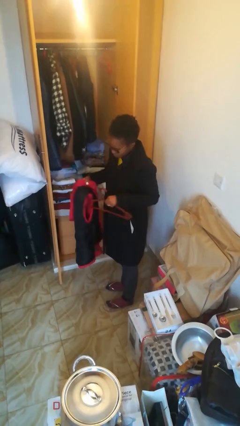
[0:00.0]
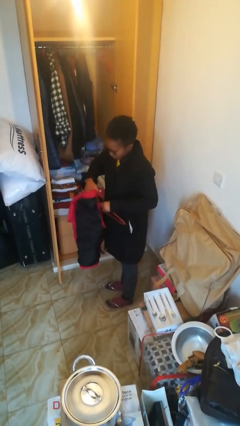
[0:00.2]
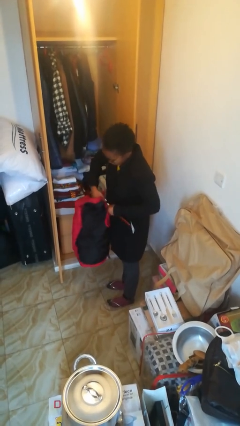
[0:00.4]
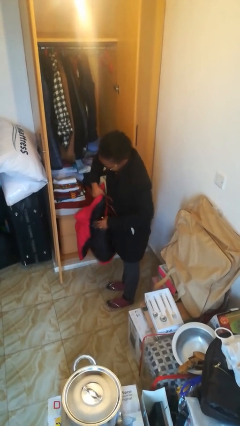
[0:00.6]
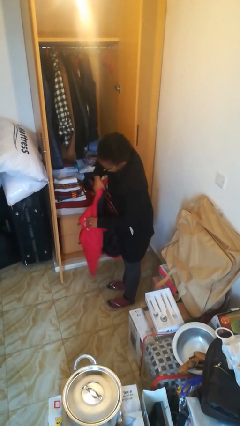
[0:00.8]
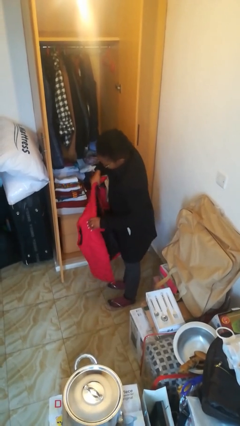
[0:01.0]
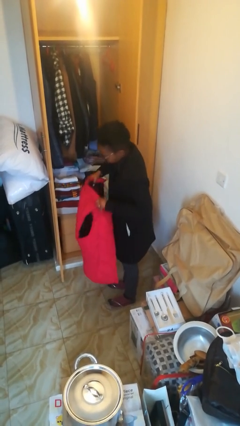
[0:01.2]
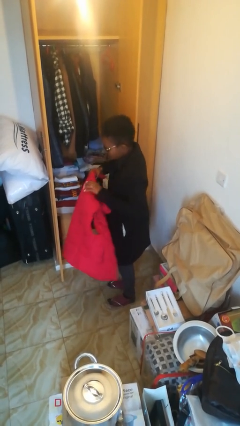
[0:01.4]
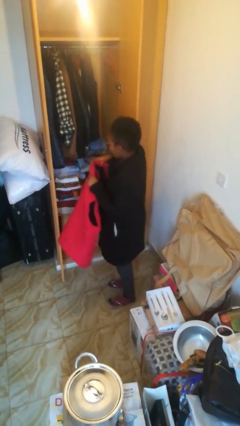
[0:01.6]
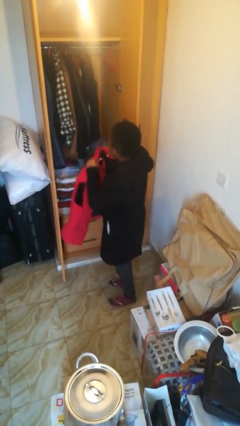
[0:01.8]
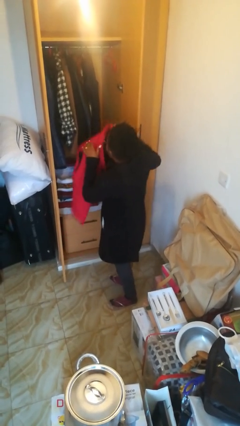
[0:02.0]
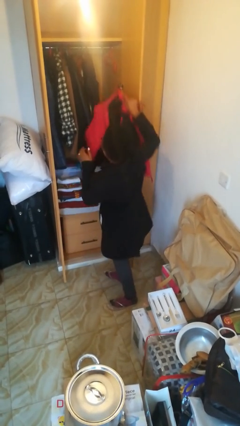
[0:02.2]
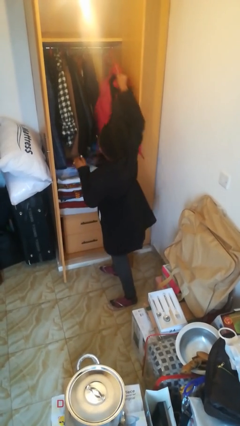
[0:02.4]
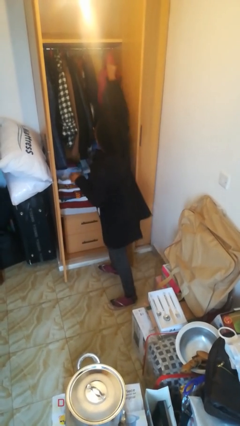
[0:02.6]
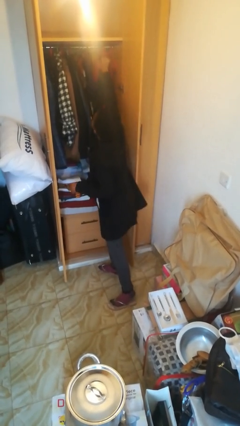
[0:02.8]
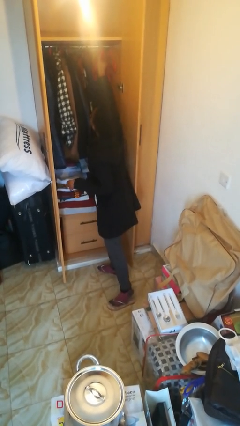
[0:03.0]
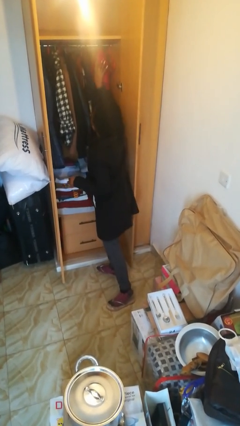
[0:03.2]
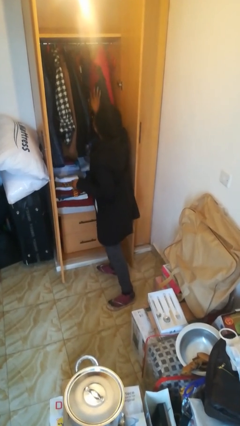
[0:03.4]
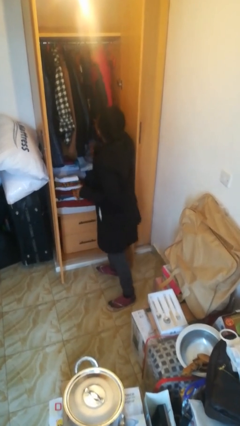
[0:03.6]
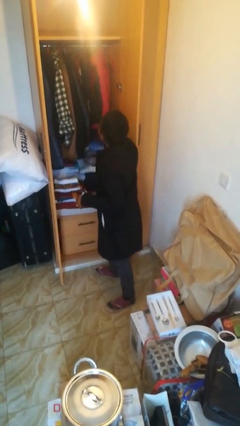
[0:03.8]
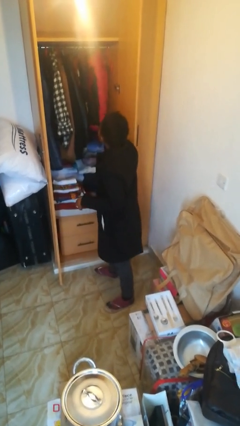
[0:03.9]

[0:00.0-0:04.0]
person puts clothes into closet

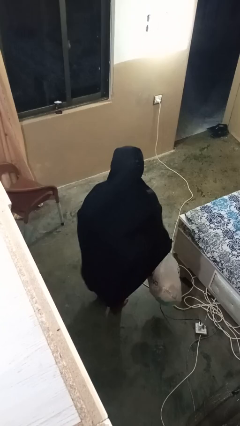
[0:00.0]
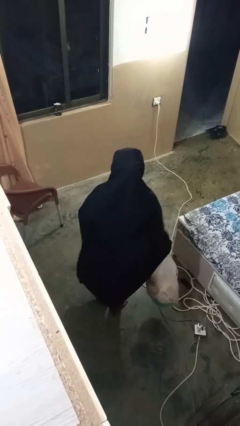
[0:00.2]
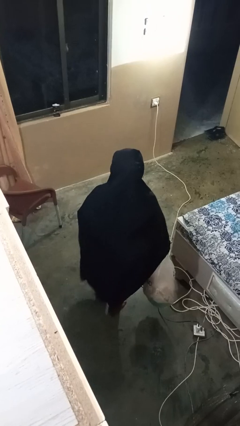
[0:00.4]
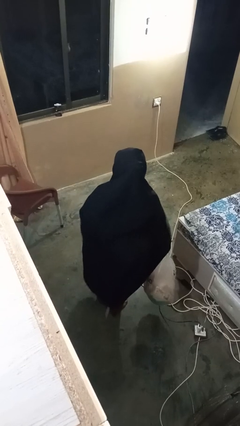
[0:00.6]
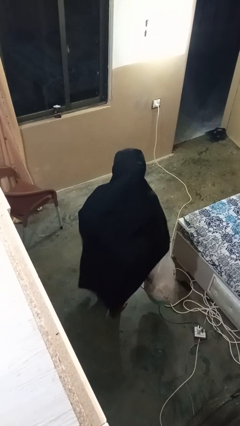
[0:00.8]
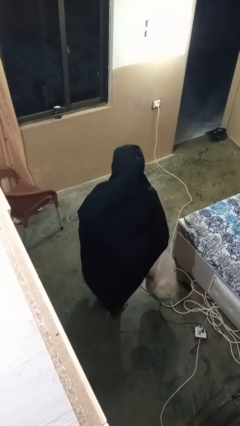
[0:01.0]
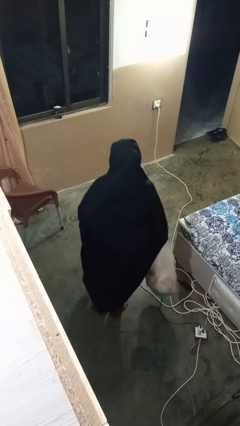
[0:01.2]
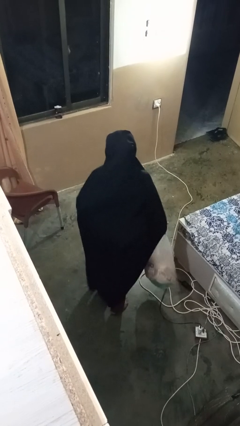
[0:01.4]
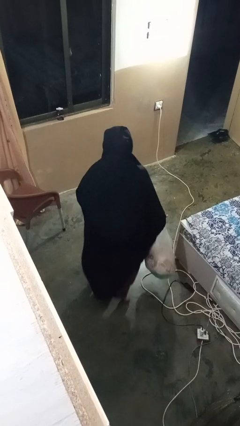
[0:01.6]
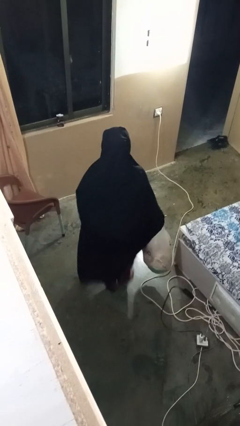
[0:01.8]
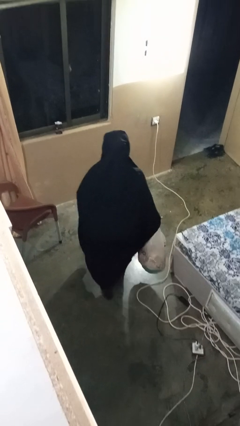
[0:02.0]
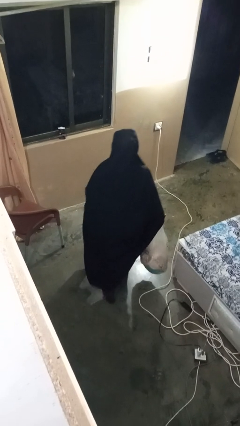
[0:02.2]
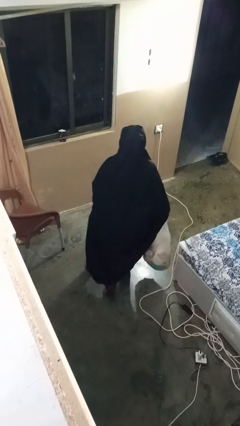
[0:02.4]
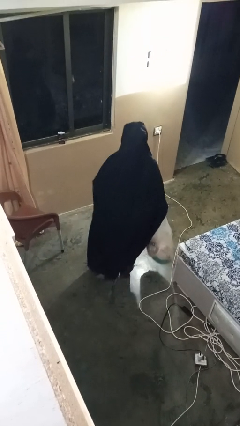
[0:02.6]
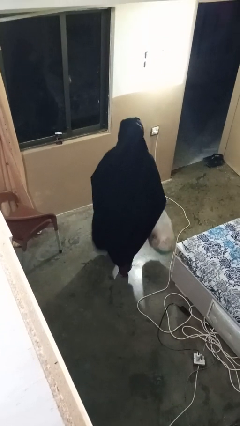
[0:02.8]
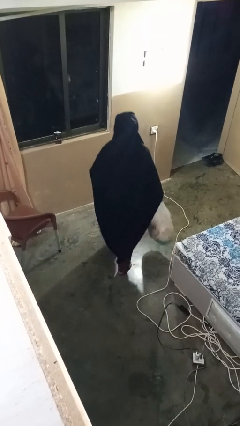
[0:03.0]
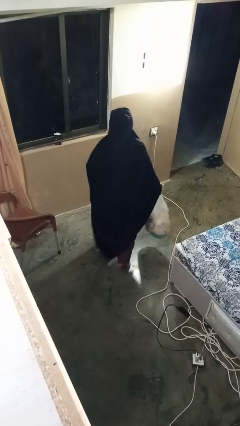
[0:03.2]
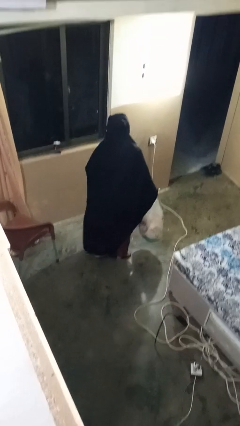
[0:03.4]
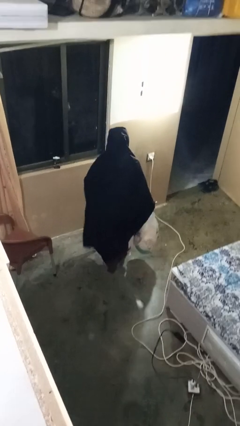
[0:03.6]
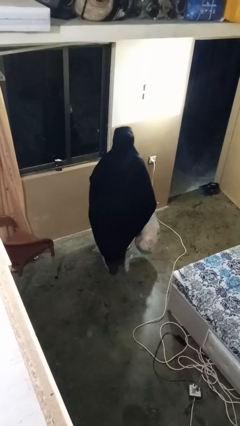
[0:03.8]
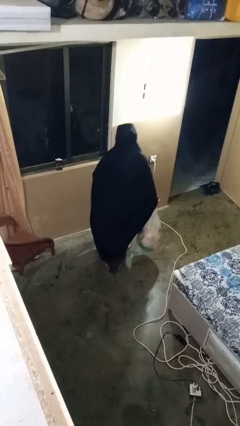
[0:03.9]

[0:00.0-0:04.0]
person carries groceries

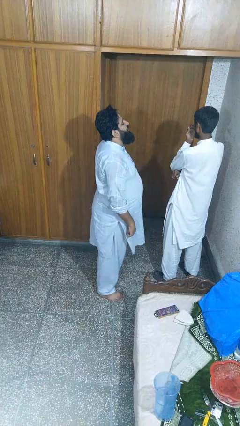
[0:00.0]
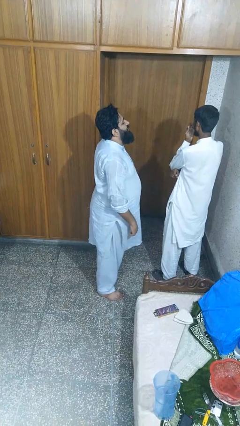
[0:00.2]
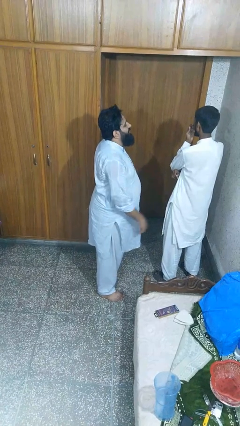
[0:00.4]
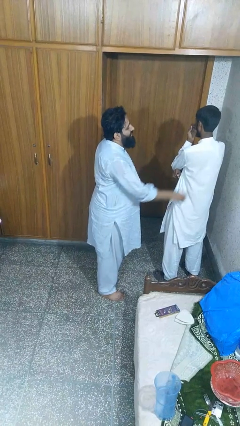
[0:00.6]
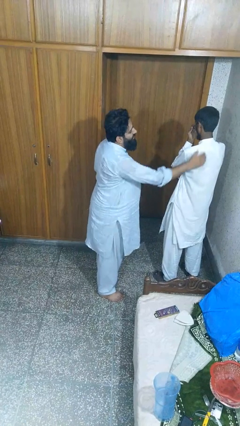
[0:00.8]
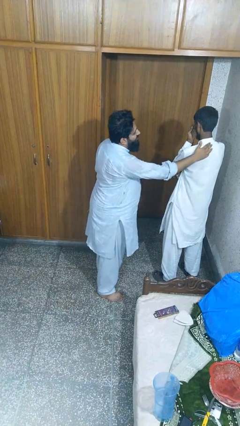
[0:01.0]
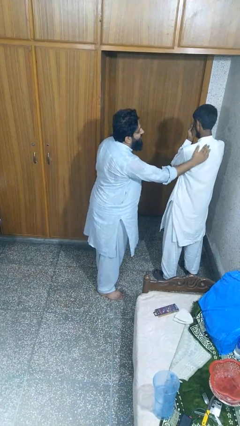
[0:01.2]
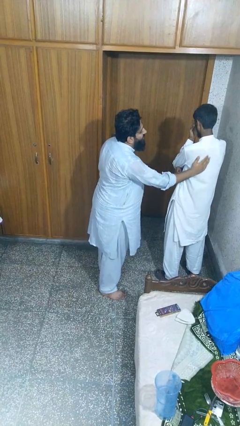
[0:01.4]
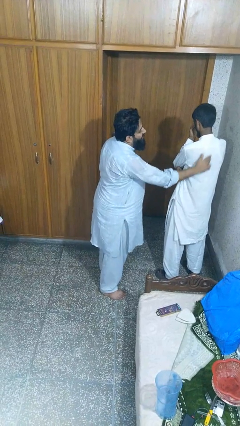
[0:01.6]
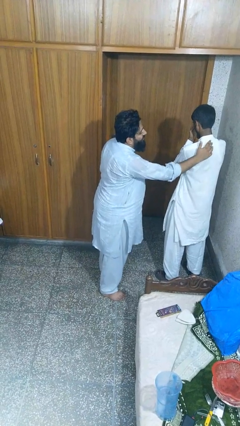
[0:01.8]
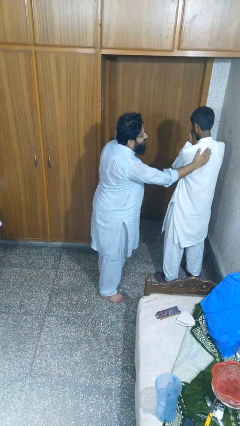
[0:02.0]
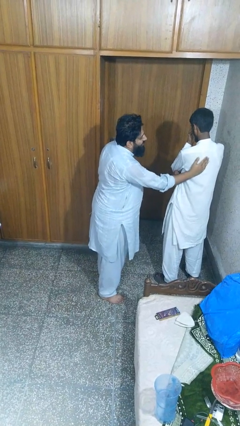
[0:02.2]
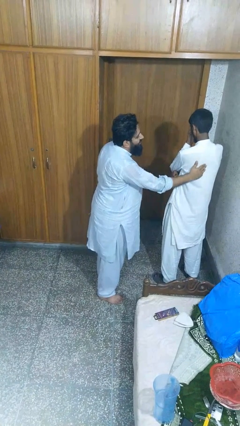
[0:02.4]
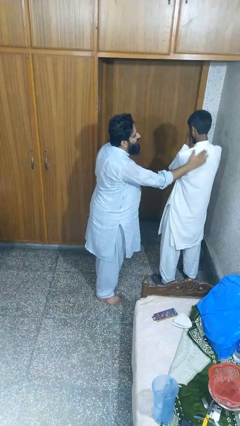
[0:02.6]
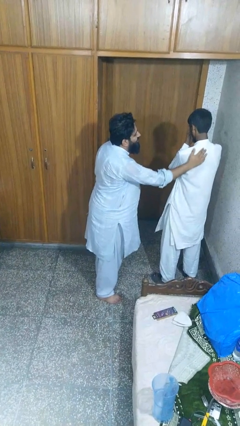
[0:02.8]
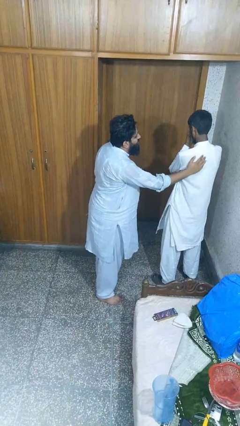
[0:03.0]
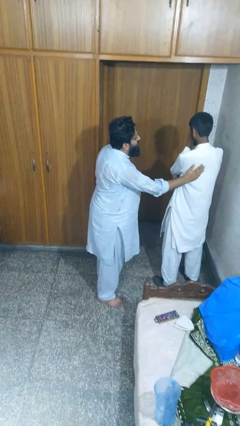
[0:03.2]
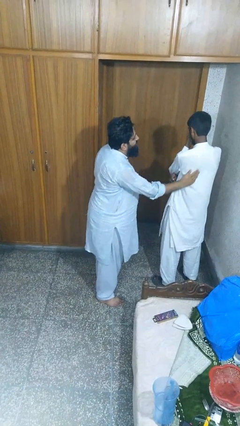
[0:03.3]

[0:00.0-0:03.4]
person touches back of person

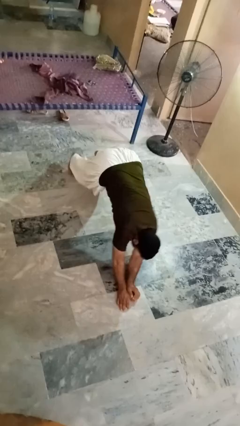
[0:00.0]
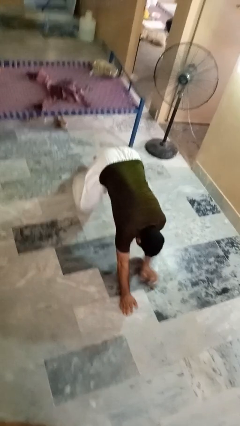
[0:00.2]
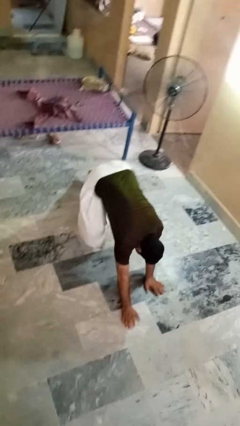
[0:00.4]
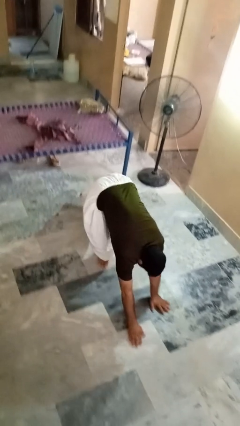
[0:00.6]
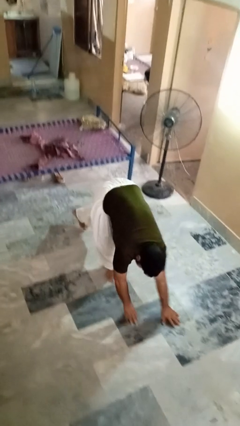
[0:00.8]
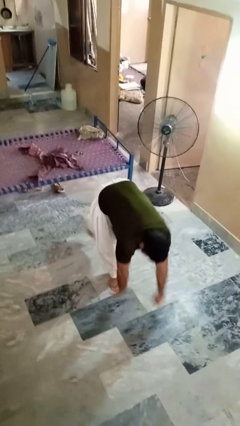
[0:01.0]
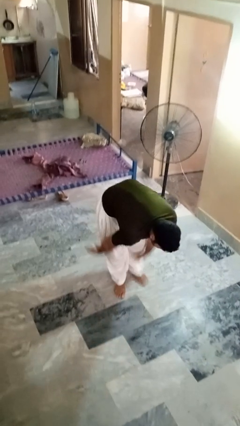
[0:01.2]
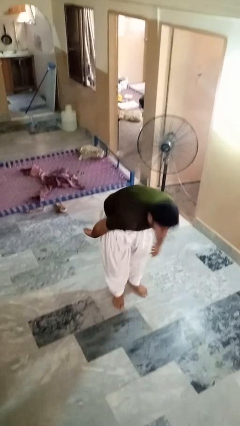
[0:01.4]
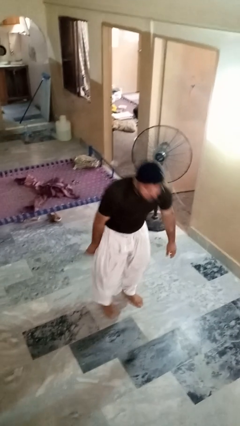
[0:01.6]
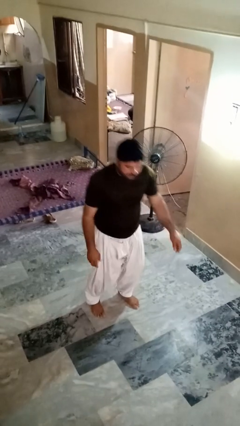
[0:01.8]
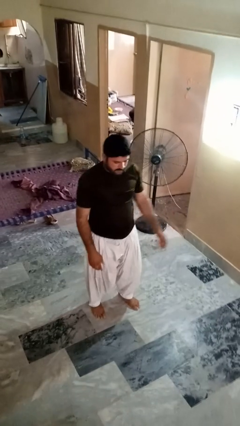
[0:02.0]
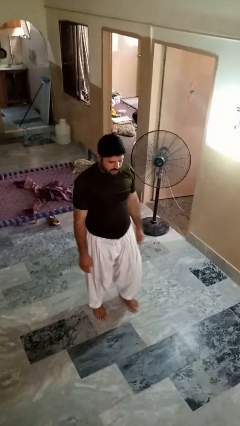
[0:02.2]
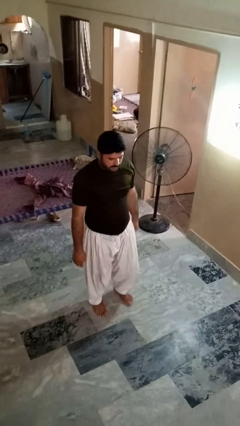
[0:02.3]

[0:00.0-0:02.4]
person stands up from floor

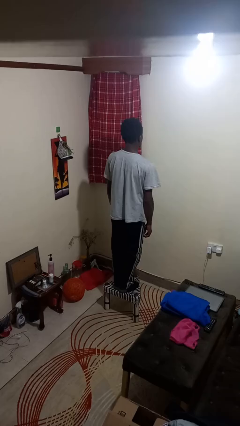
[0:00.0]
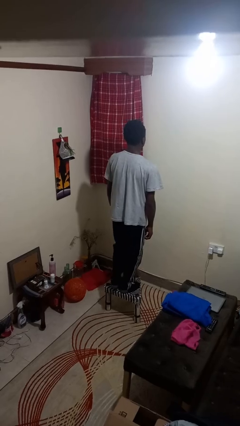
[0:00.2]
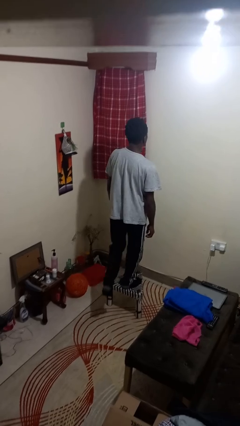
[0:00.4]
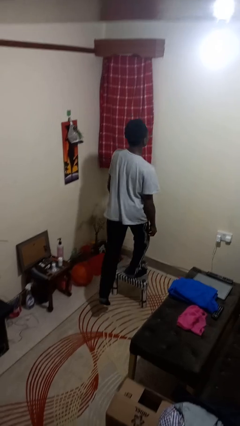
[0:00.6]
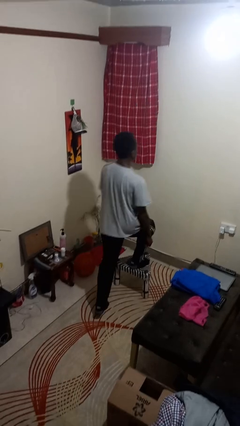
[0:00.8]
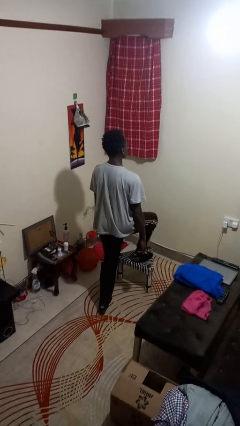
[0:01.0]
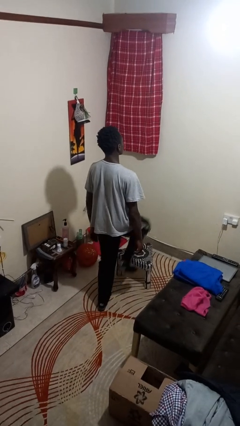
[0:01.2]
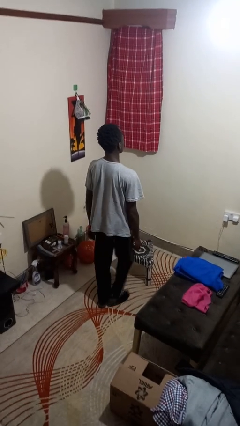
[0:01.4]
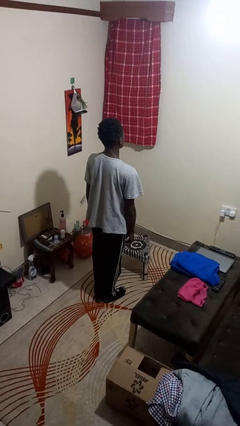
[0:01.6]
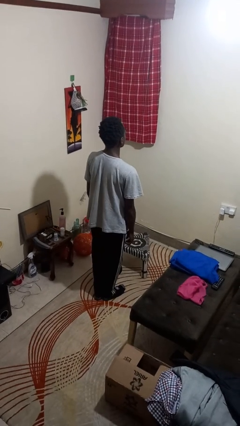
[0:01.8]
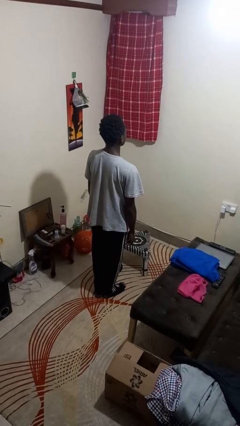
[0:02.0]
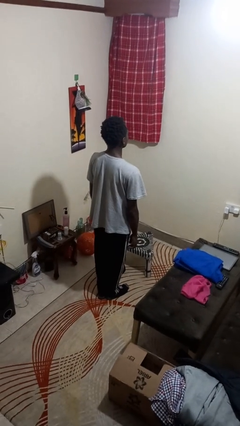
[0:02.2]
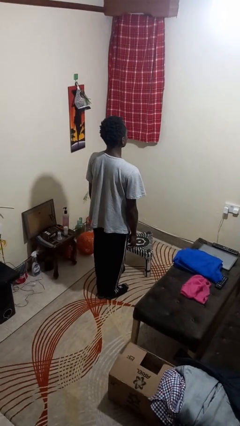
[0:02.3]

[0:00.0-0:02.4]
person climbs off chair

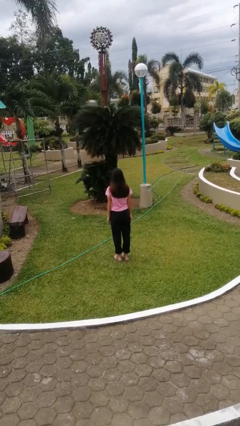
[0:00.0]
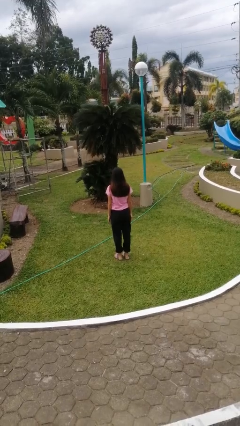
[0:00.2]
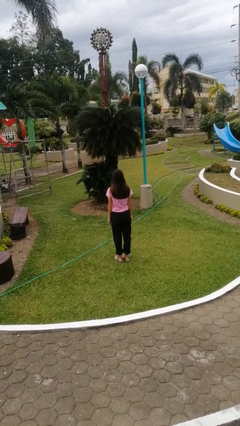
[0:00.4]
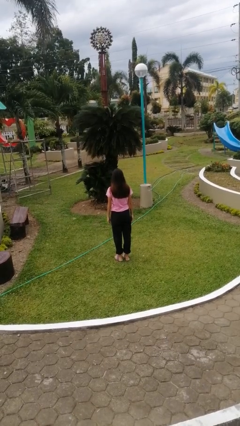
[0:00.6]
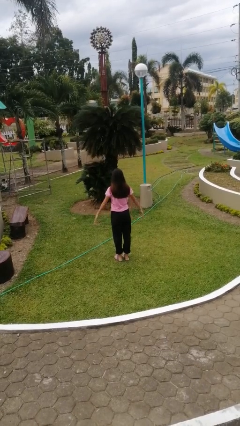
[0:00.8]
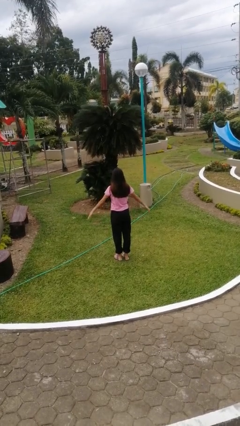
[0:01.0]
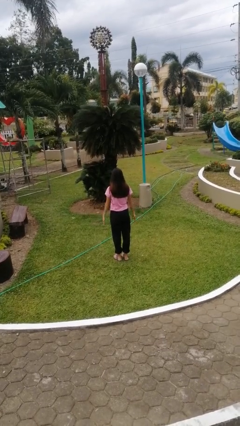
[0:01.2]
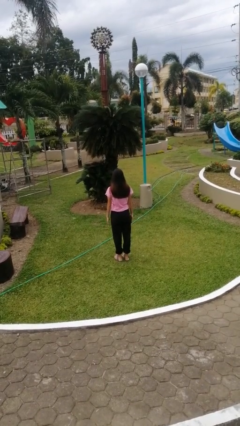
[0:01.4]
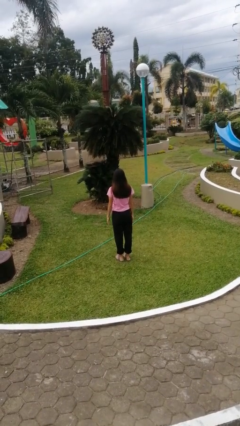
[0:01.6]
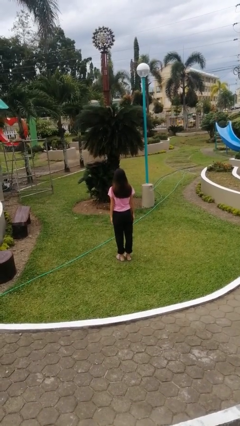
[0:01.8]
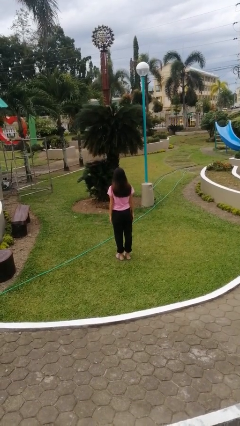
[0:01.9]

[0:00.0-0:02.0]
person slaps hands on thighs
